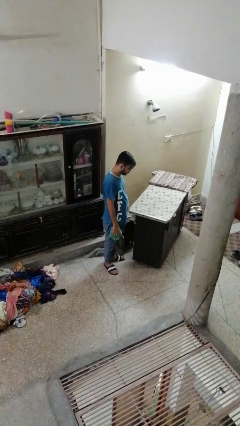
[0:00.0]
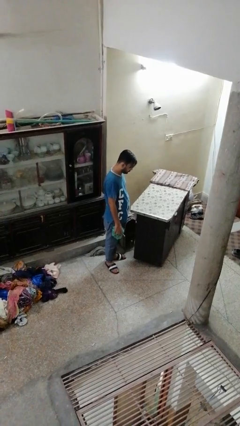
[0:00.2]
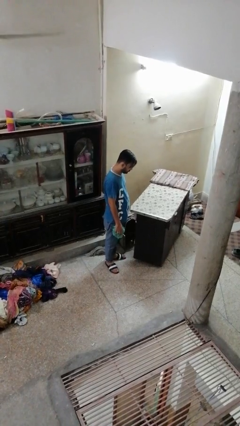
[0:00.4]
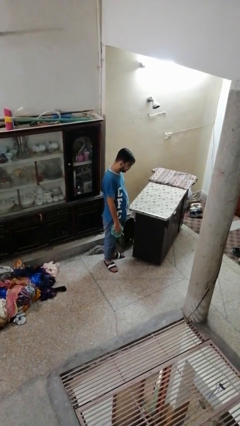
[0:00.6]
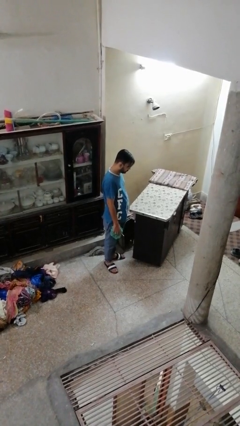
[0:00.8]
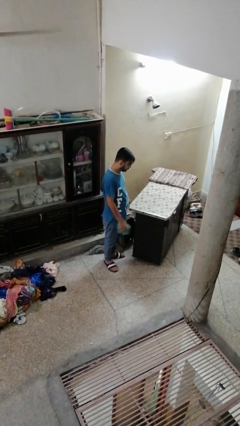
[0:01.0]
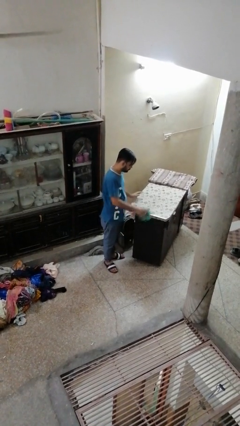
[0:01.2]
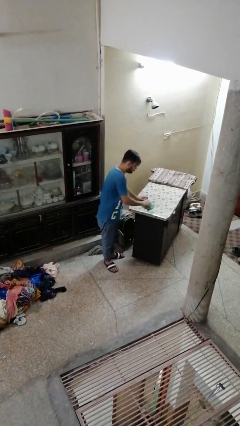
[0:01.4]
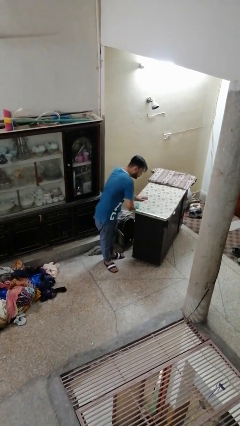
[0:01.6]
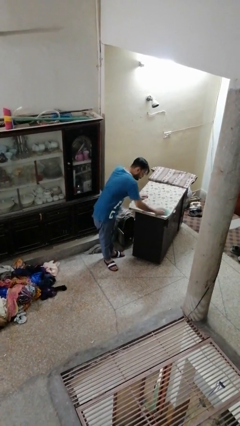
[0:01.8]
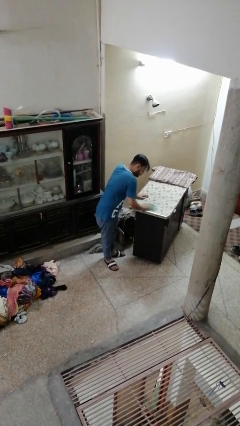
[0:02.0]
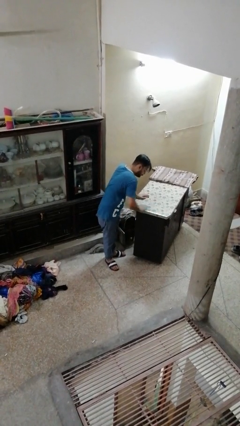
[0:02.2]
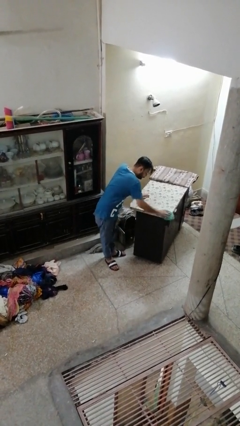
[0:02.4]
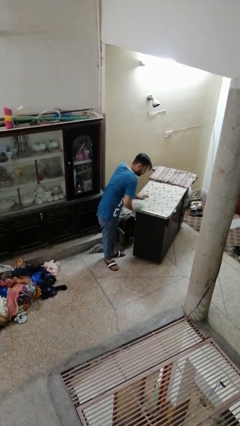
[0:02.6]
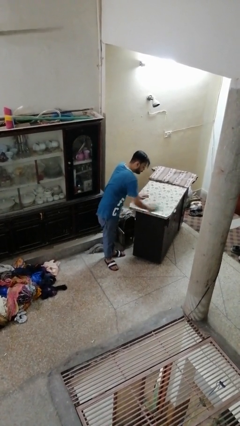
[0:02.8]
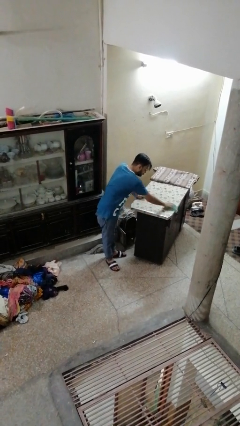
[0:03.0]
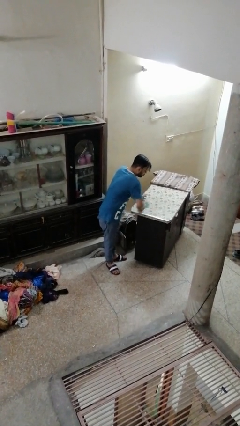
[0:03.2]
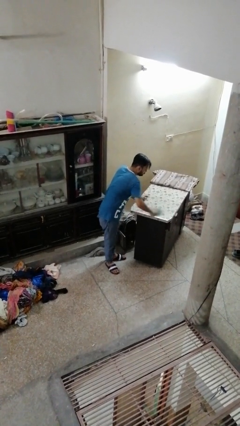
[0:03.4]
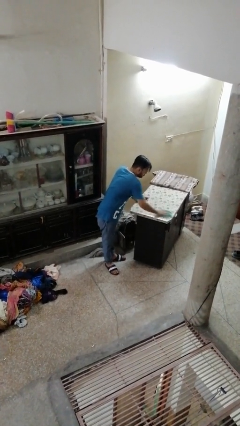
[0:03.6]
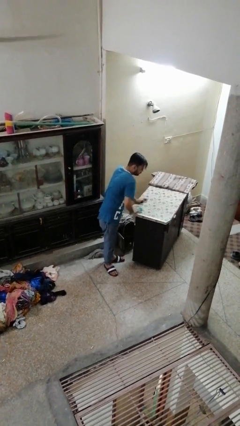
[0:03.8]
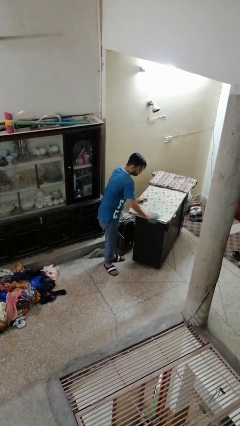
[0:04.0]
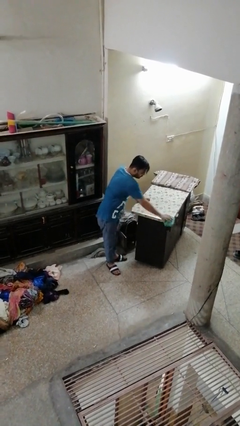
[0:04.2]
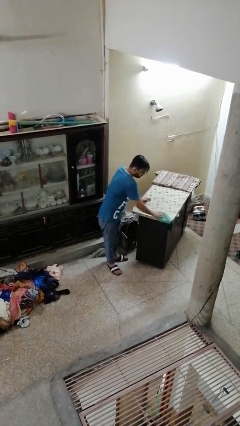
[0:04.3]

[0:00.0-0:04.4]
person cleans table with rag

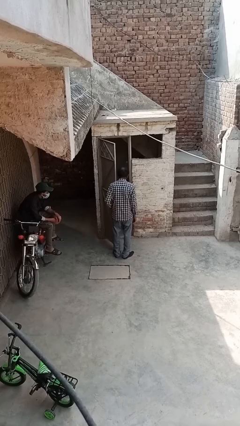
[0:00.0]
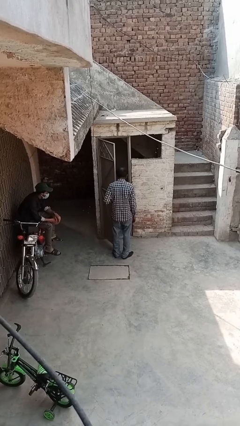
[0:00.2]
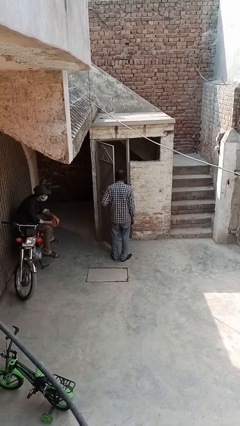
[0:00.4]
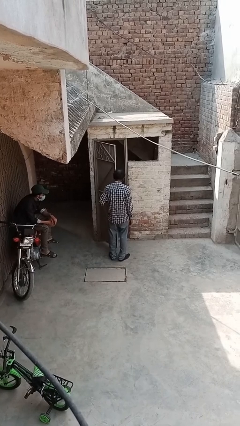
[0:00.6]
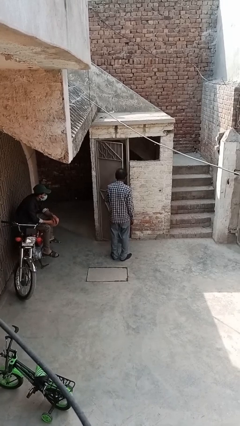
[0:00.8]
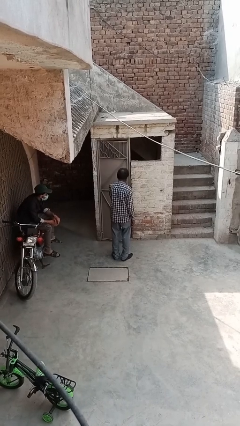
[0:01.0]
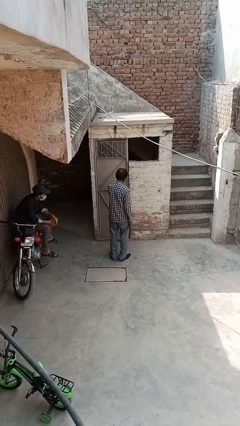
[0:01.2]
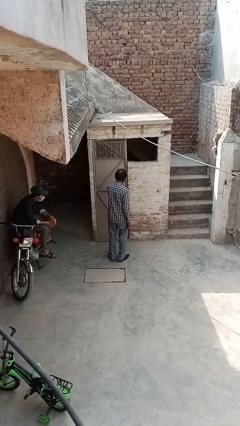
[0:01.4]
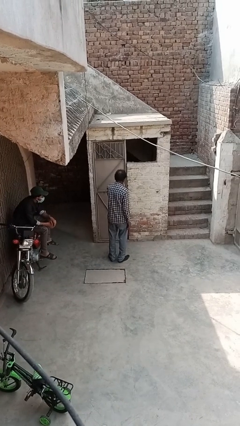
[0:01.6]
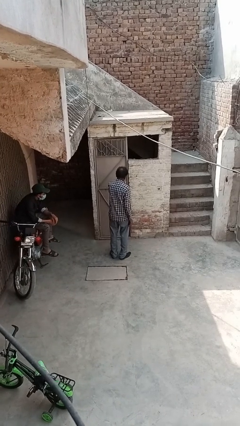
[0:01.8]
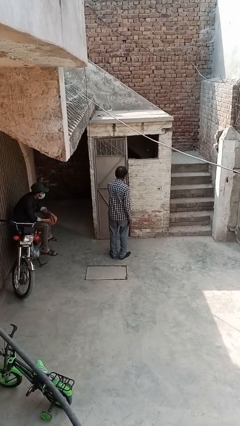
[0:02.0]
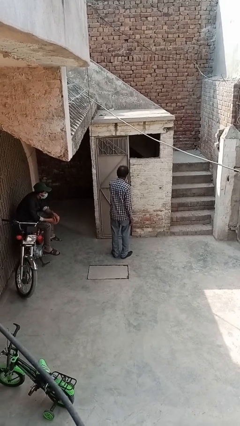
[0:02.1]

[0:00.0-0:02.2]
person closes facility door

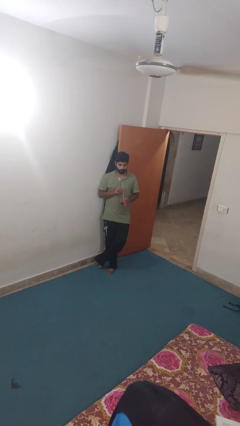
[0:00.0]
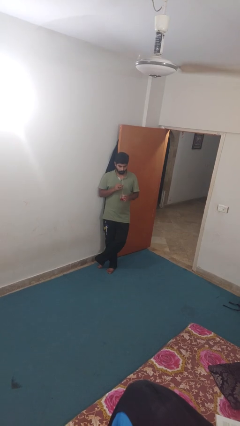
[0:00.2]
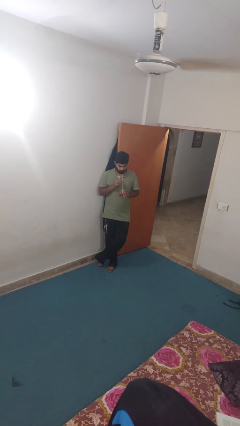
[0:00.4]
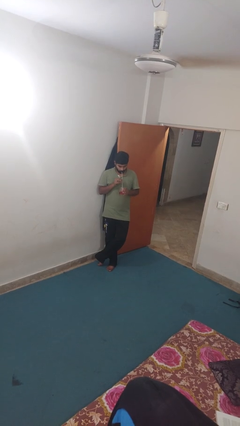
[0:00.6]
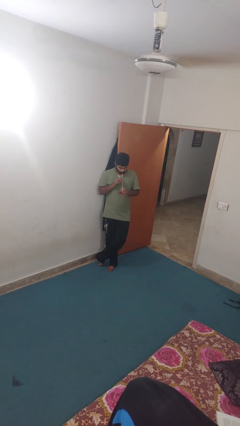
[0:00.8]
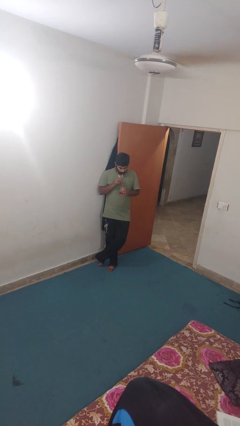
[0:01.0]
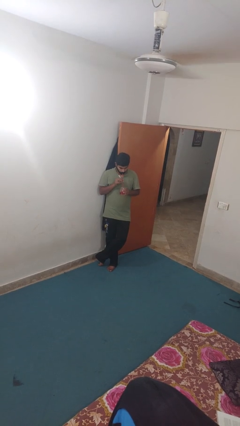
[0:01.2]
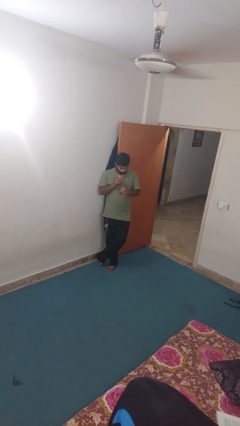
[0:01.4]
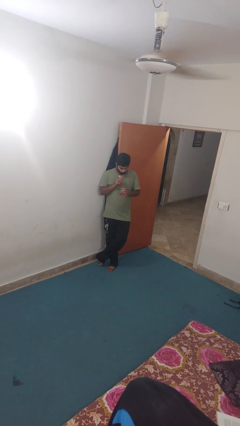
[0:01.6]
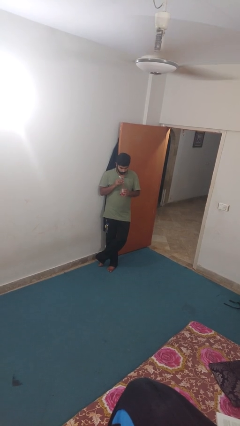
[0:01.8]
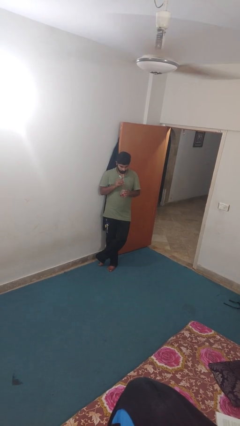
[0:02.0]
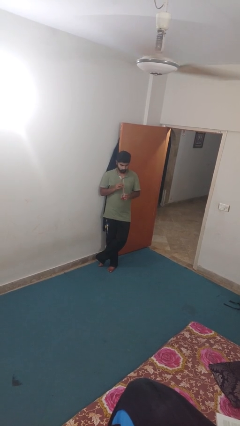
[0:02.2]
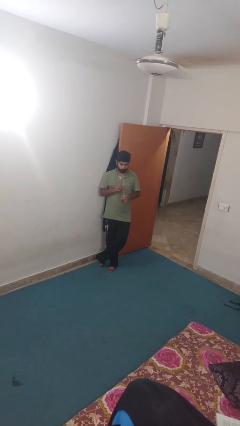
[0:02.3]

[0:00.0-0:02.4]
person drinks from straw

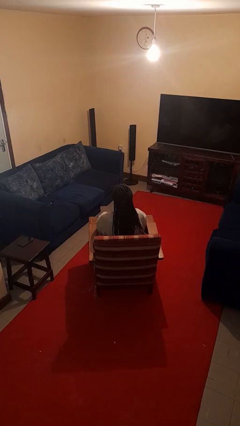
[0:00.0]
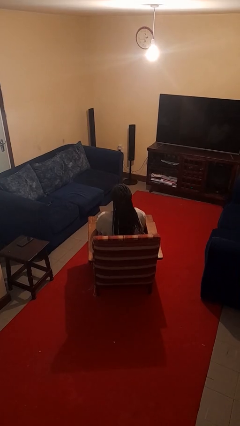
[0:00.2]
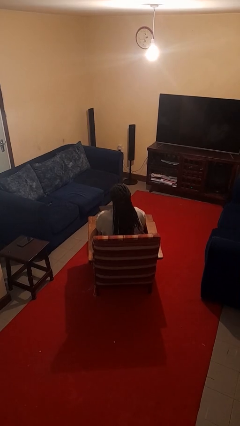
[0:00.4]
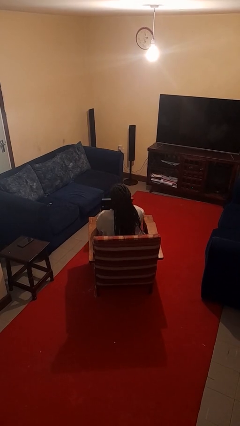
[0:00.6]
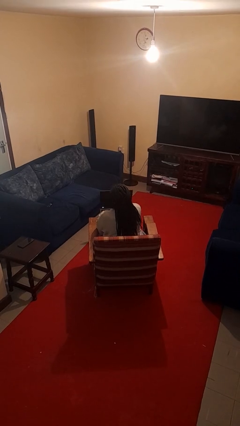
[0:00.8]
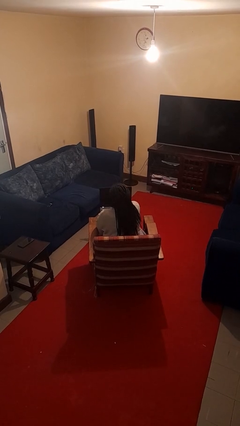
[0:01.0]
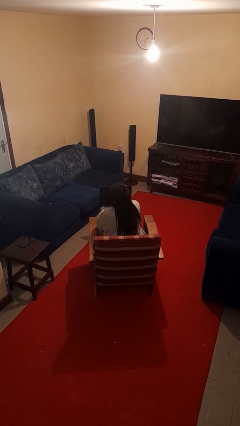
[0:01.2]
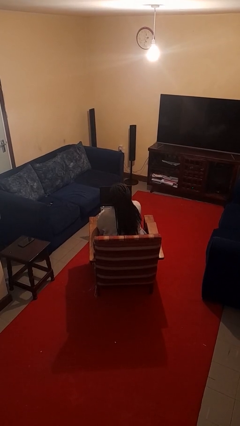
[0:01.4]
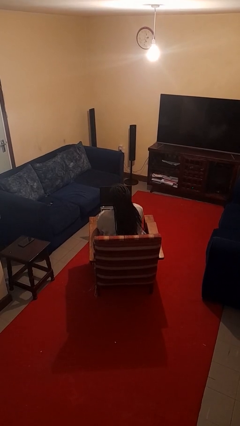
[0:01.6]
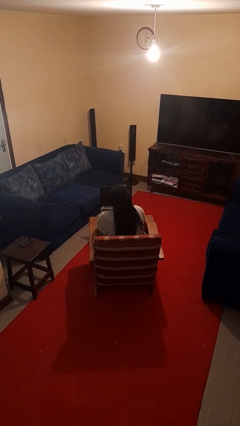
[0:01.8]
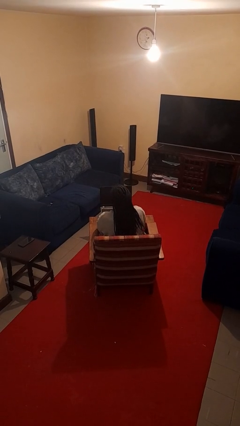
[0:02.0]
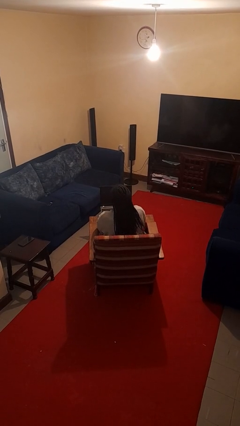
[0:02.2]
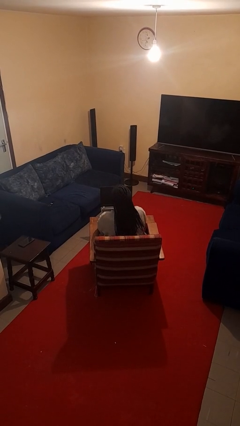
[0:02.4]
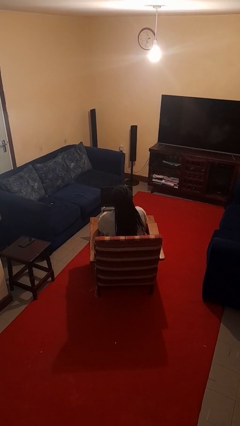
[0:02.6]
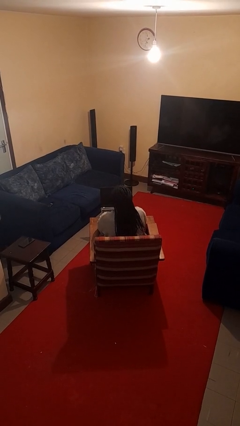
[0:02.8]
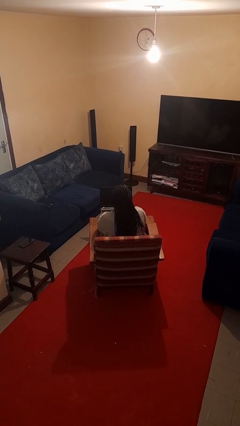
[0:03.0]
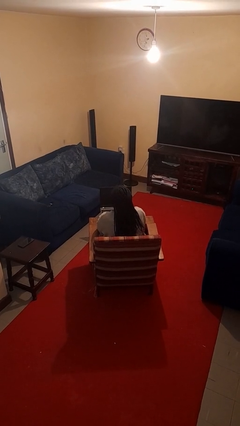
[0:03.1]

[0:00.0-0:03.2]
person opens laptop

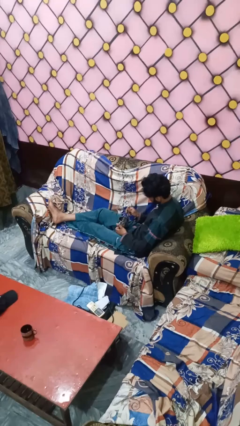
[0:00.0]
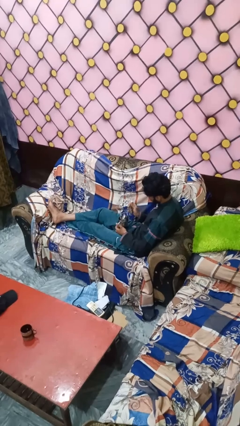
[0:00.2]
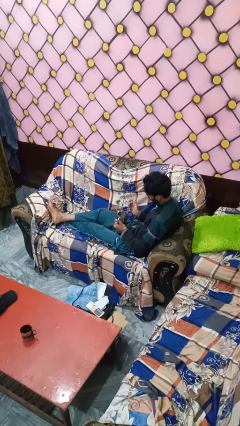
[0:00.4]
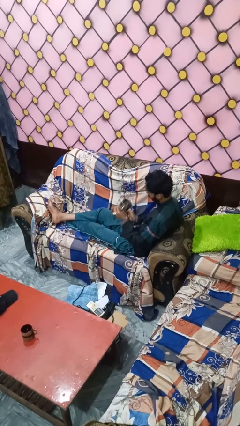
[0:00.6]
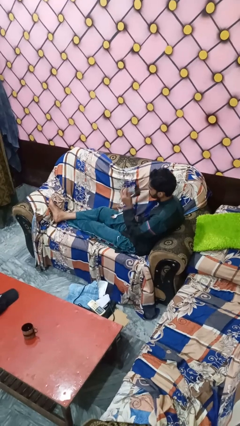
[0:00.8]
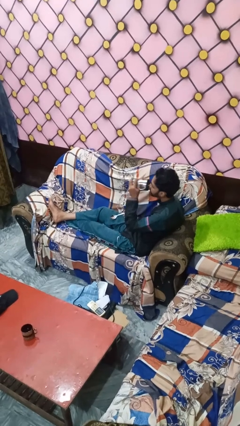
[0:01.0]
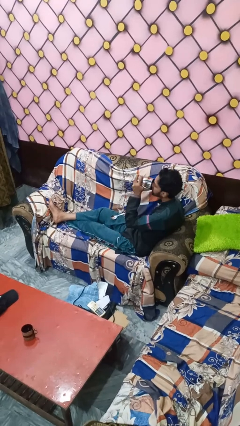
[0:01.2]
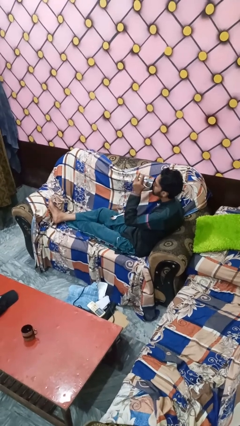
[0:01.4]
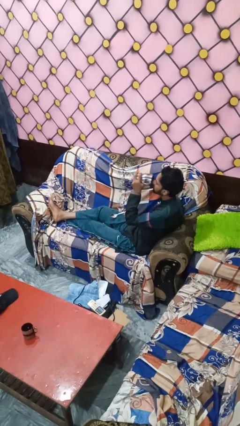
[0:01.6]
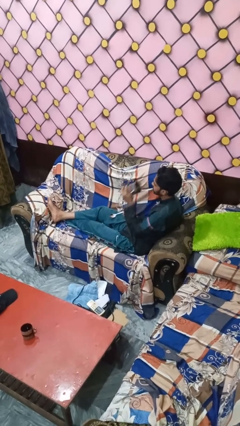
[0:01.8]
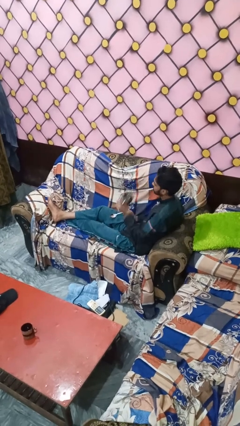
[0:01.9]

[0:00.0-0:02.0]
person drinks from mug

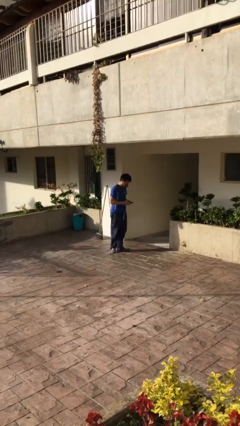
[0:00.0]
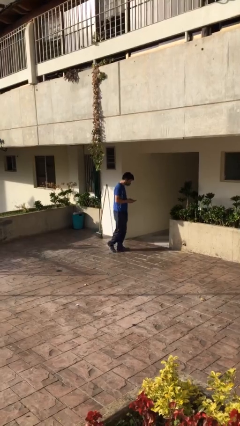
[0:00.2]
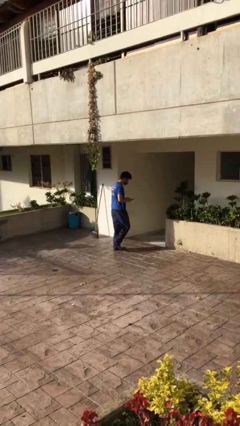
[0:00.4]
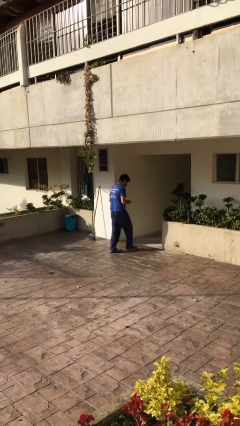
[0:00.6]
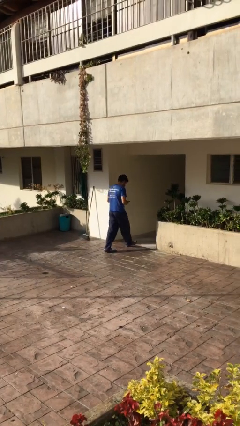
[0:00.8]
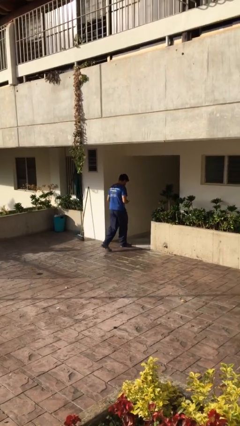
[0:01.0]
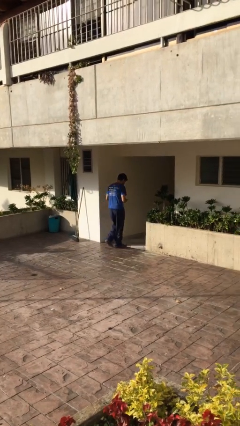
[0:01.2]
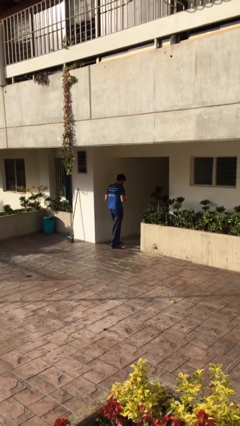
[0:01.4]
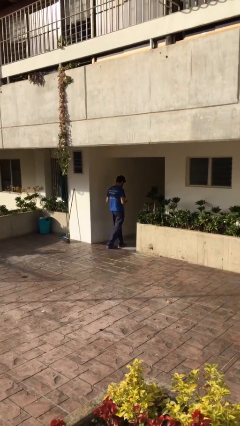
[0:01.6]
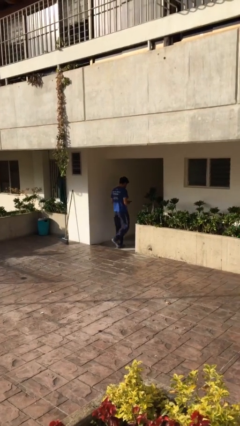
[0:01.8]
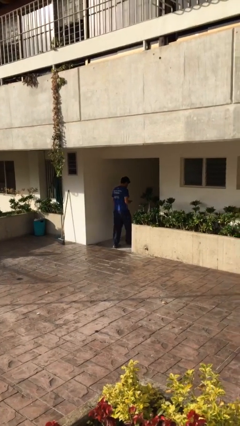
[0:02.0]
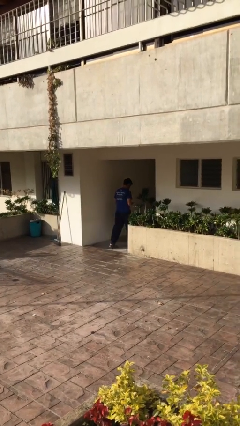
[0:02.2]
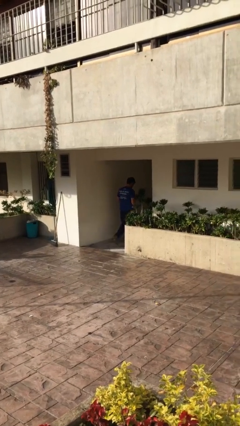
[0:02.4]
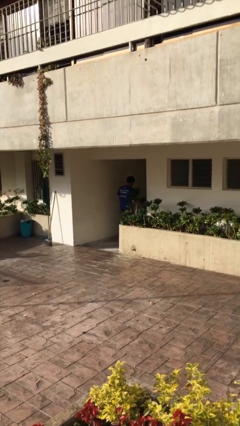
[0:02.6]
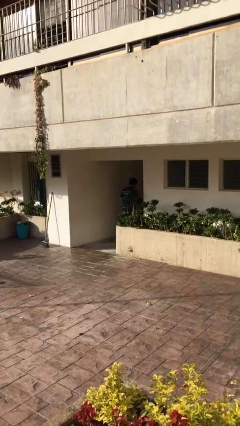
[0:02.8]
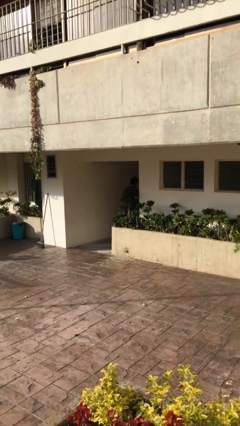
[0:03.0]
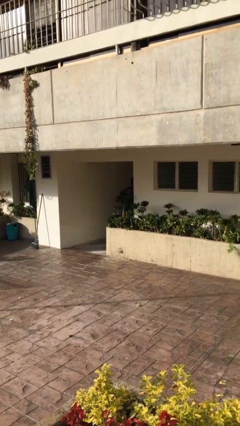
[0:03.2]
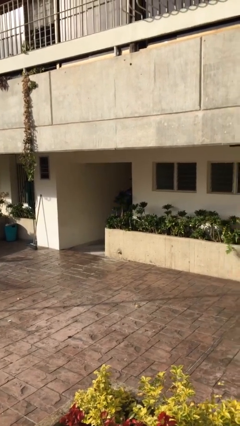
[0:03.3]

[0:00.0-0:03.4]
person exits scene through structure
